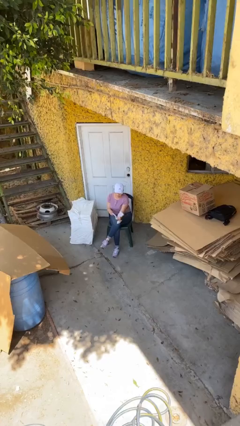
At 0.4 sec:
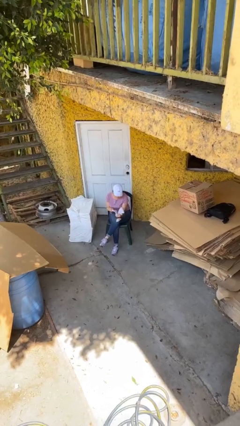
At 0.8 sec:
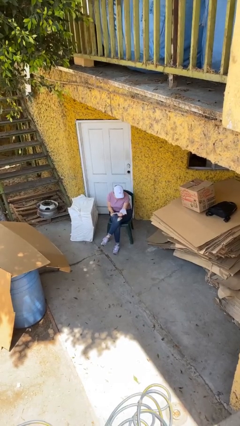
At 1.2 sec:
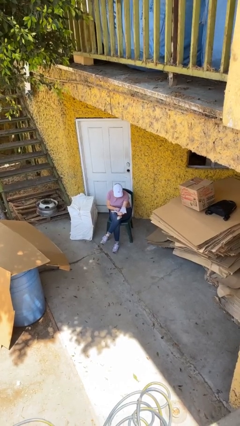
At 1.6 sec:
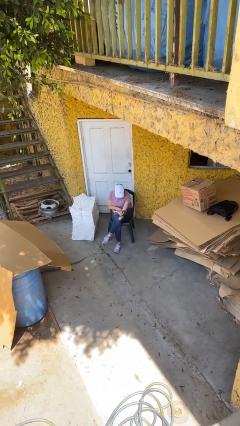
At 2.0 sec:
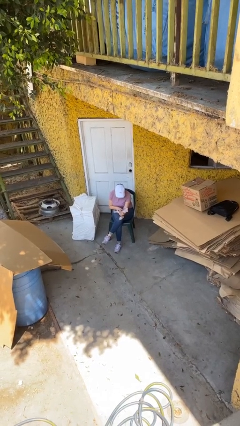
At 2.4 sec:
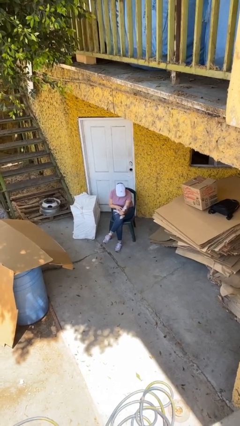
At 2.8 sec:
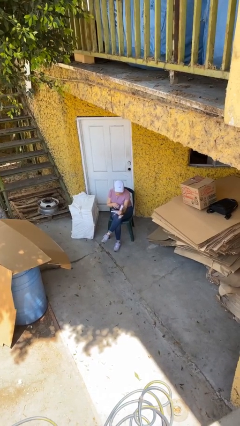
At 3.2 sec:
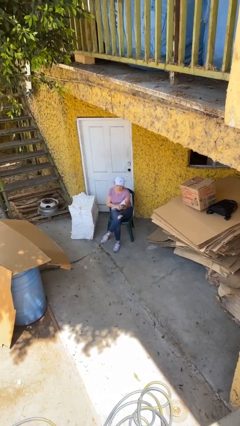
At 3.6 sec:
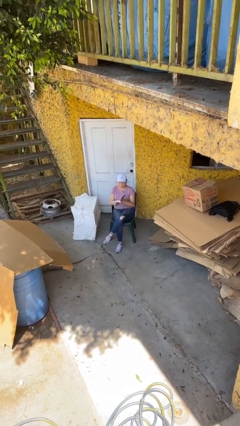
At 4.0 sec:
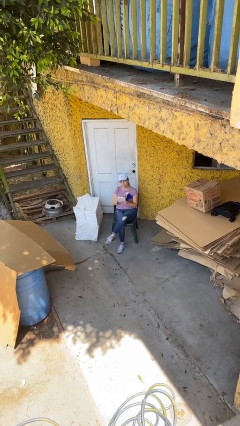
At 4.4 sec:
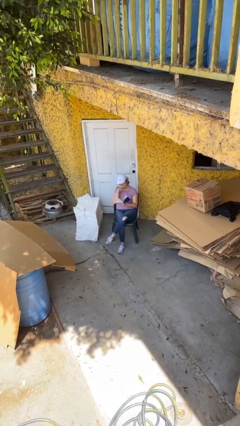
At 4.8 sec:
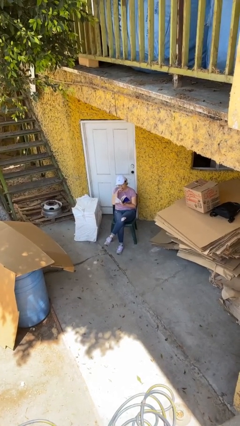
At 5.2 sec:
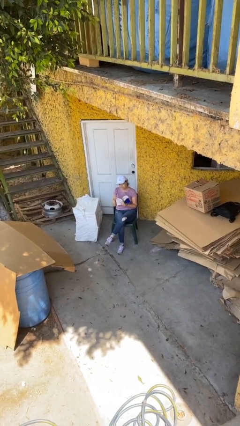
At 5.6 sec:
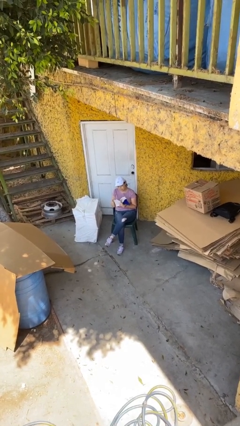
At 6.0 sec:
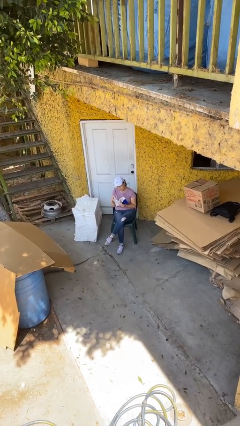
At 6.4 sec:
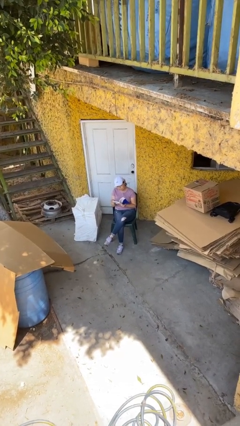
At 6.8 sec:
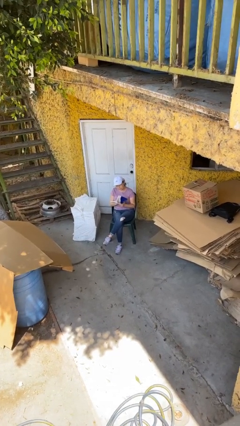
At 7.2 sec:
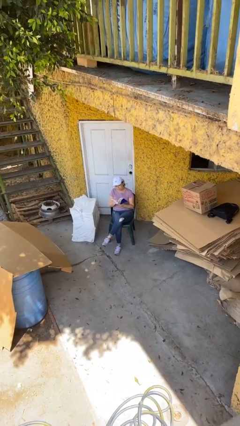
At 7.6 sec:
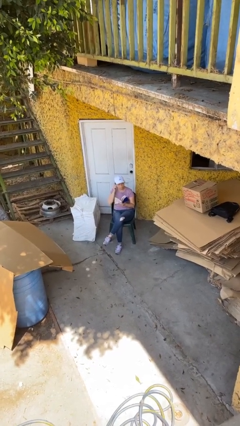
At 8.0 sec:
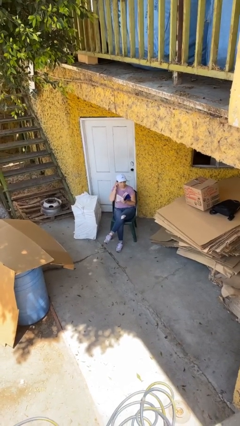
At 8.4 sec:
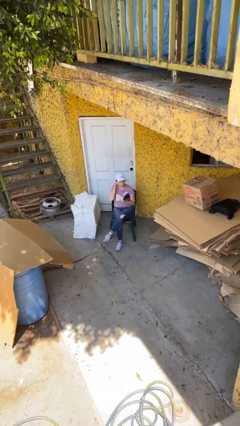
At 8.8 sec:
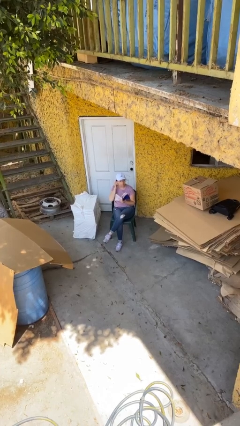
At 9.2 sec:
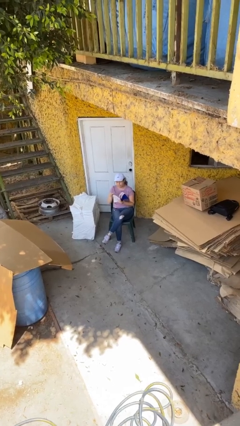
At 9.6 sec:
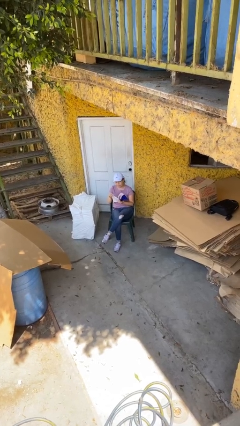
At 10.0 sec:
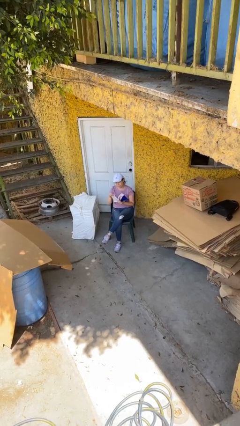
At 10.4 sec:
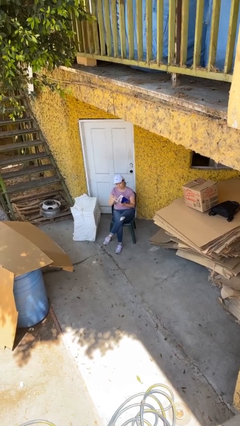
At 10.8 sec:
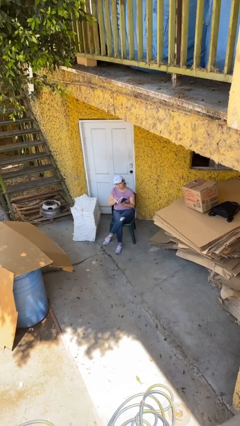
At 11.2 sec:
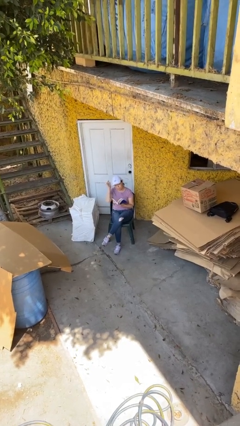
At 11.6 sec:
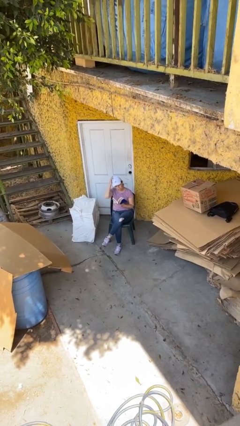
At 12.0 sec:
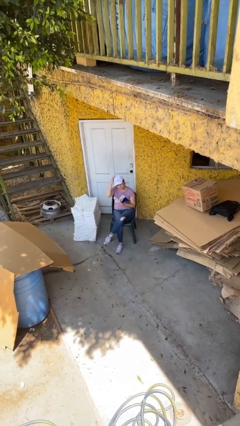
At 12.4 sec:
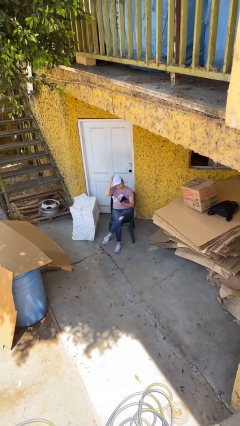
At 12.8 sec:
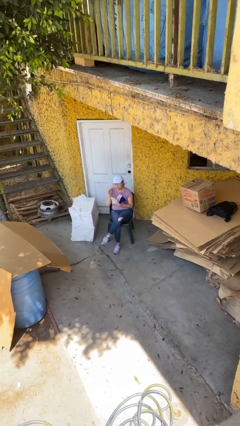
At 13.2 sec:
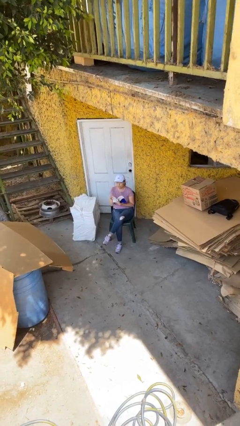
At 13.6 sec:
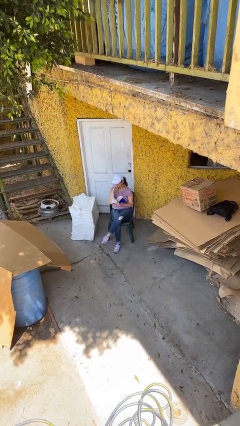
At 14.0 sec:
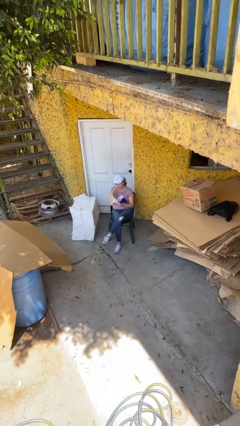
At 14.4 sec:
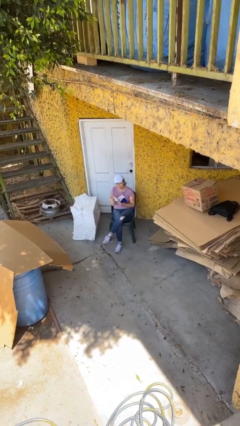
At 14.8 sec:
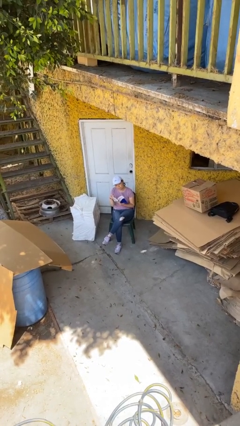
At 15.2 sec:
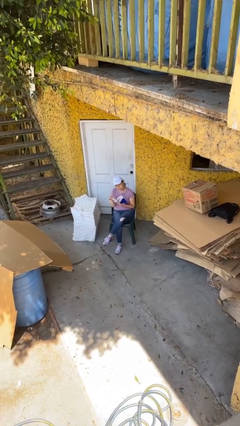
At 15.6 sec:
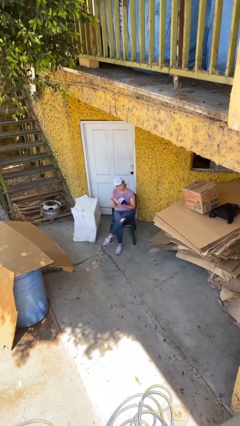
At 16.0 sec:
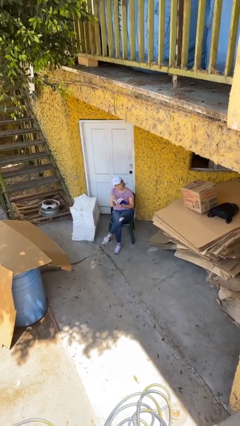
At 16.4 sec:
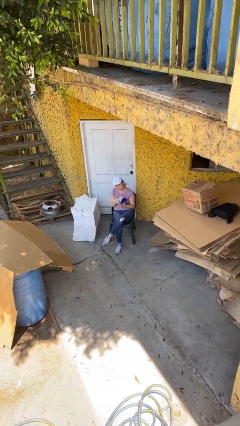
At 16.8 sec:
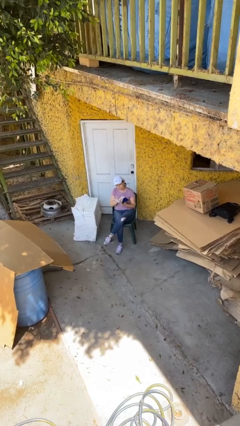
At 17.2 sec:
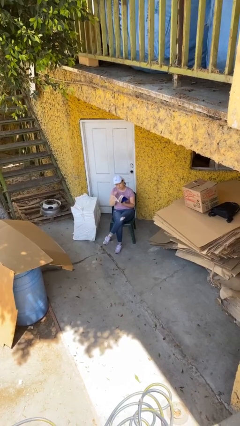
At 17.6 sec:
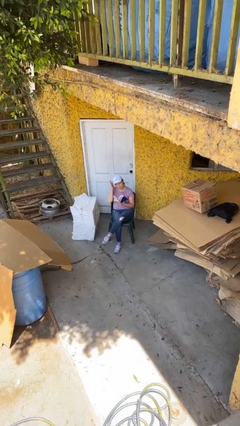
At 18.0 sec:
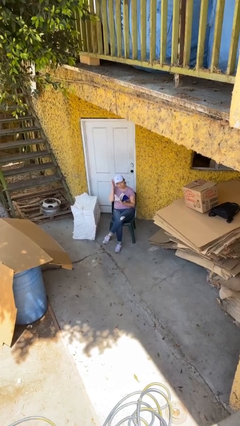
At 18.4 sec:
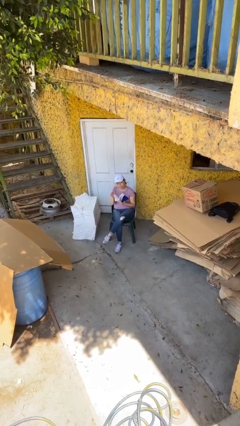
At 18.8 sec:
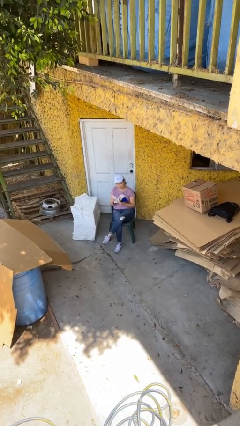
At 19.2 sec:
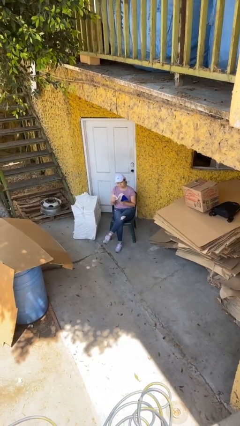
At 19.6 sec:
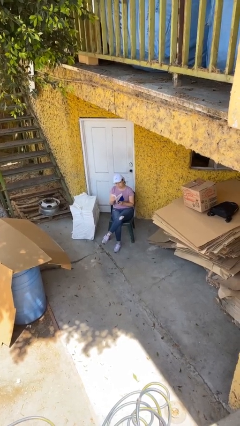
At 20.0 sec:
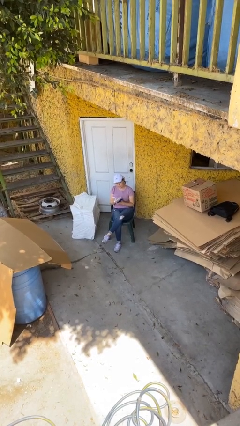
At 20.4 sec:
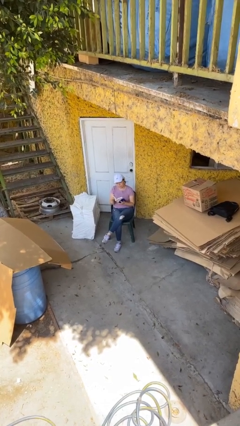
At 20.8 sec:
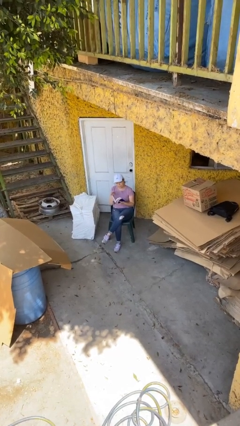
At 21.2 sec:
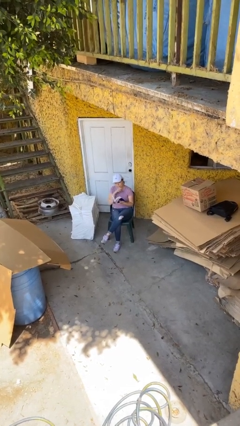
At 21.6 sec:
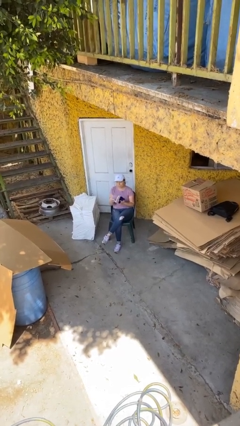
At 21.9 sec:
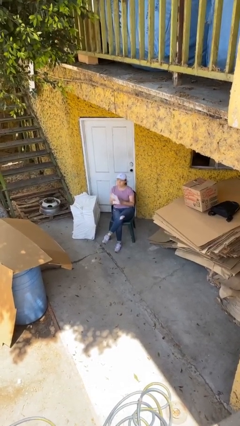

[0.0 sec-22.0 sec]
person reads document

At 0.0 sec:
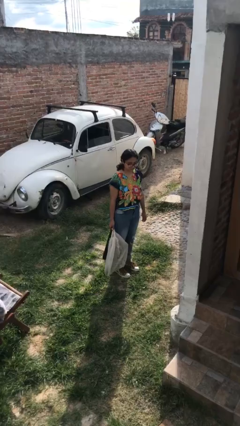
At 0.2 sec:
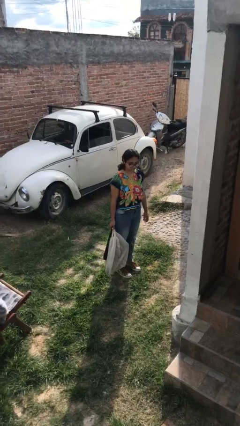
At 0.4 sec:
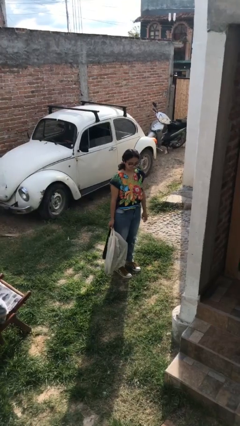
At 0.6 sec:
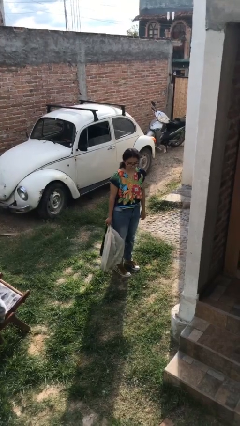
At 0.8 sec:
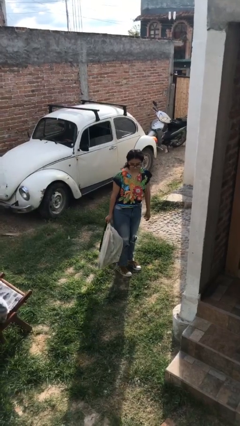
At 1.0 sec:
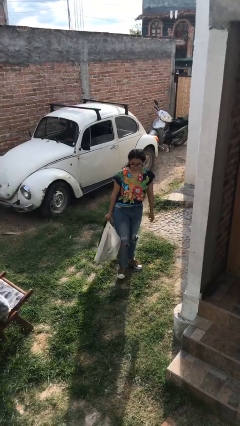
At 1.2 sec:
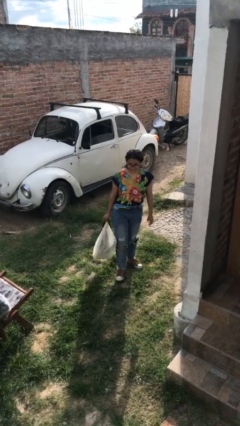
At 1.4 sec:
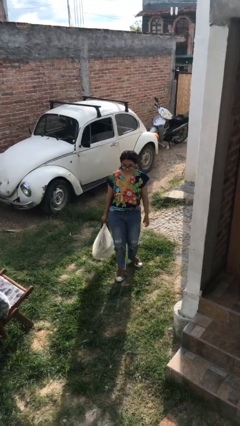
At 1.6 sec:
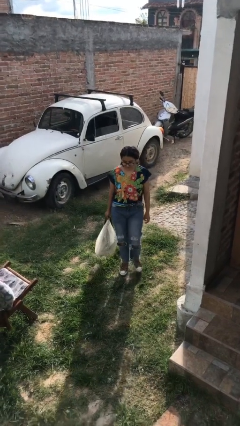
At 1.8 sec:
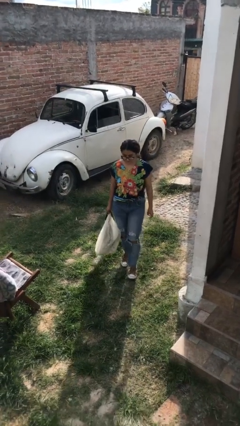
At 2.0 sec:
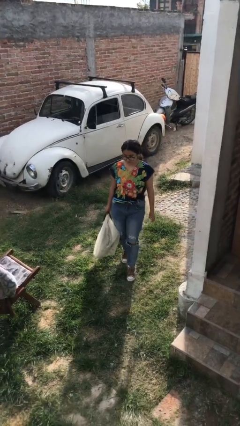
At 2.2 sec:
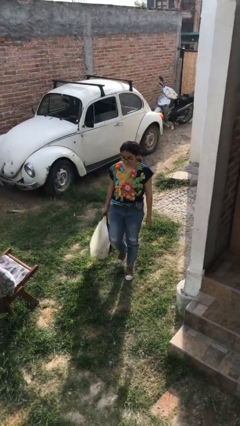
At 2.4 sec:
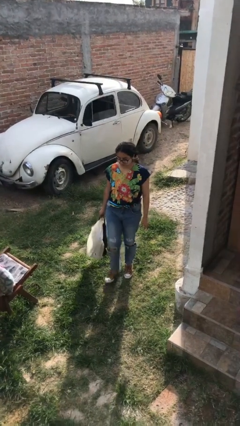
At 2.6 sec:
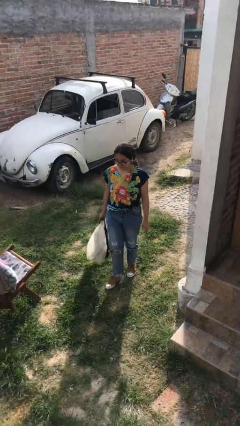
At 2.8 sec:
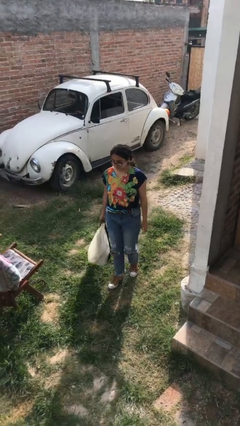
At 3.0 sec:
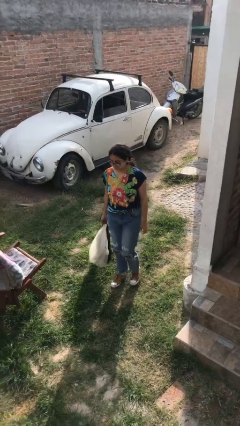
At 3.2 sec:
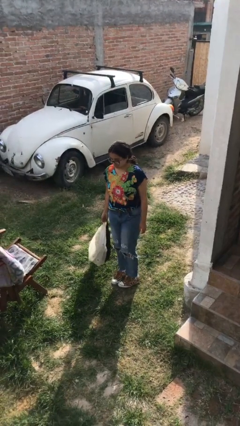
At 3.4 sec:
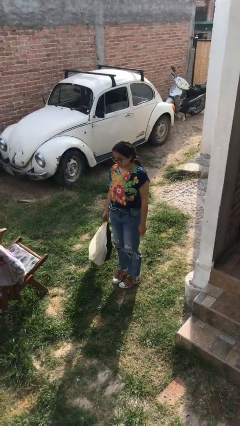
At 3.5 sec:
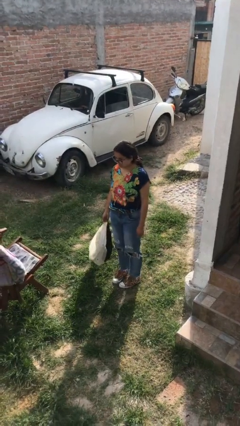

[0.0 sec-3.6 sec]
person carries groceries

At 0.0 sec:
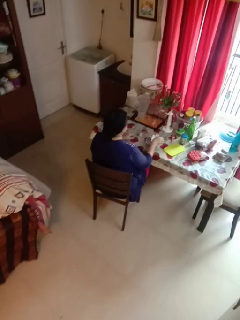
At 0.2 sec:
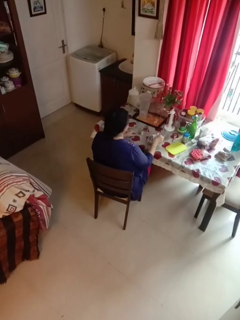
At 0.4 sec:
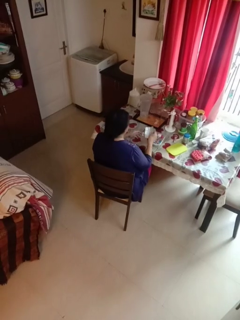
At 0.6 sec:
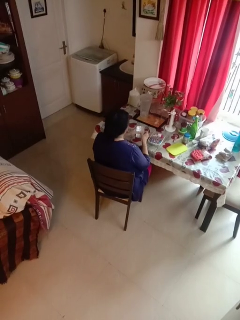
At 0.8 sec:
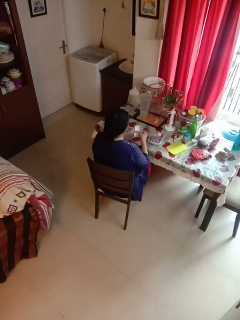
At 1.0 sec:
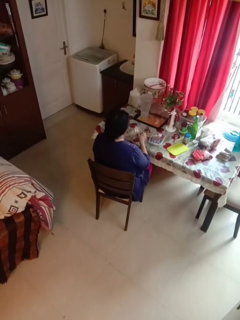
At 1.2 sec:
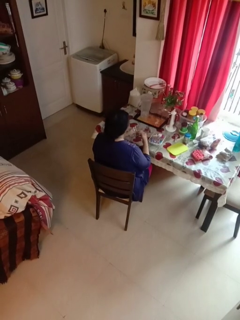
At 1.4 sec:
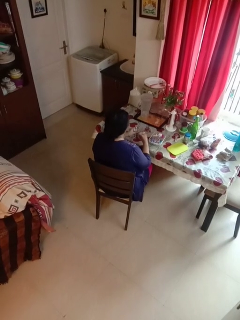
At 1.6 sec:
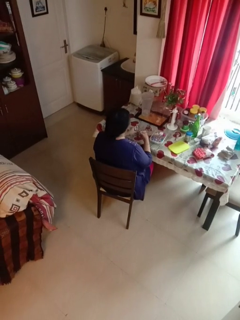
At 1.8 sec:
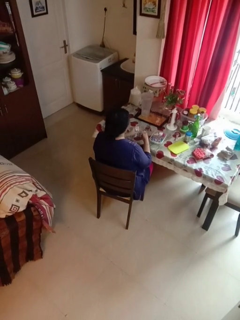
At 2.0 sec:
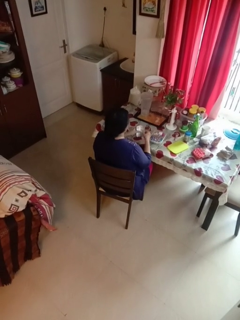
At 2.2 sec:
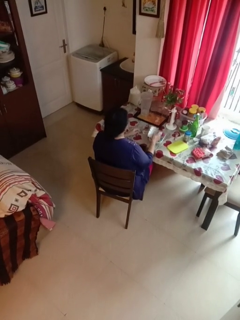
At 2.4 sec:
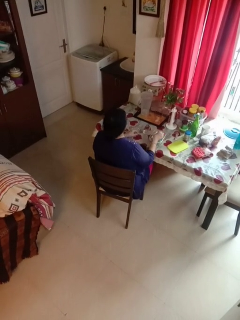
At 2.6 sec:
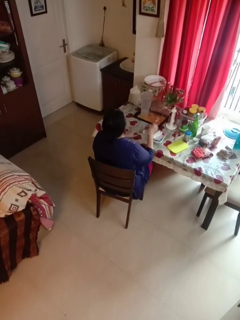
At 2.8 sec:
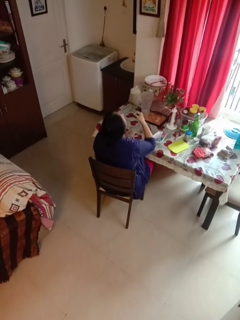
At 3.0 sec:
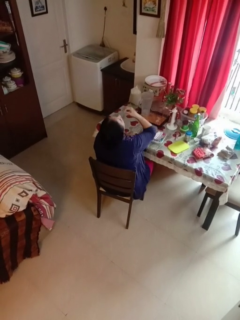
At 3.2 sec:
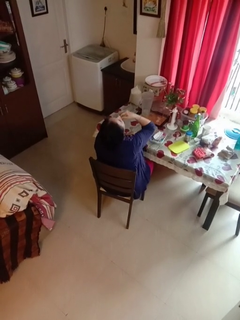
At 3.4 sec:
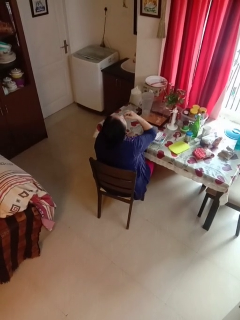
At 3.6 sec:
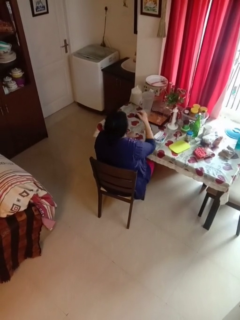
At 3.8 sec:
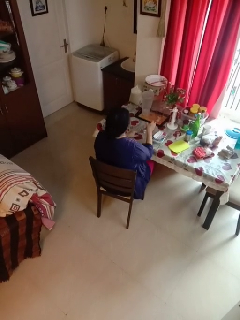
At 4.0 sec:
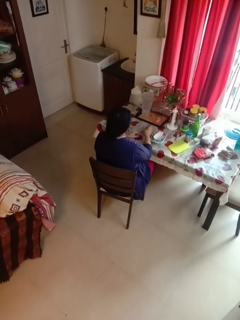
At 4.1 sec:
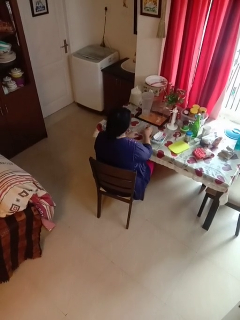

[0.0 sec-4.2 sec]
person takes medicine pills
